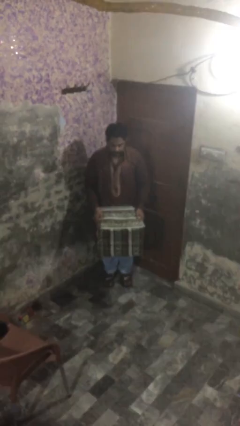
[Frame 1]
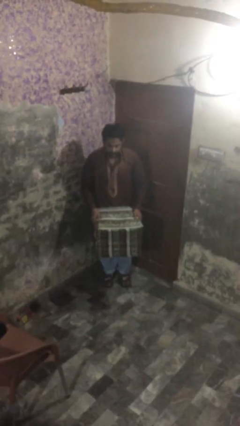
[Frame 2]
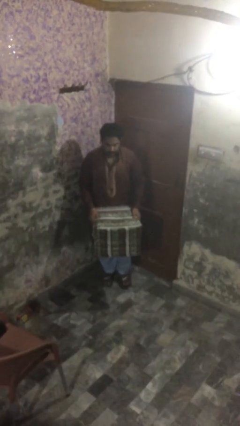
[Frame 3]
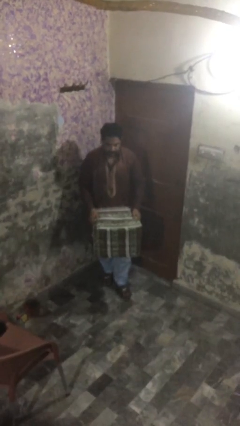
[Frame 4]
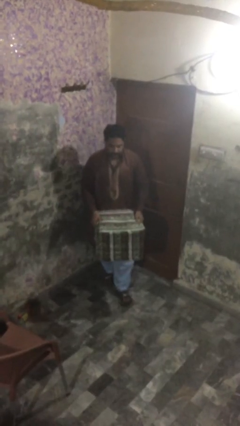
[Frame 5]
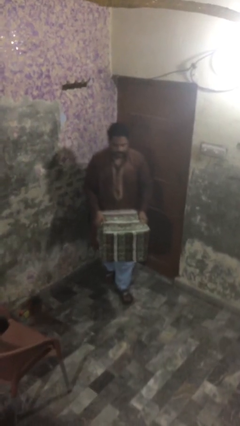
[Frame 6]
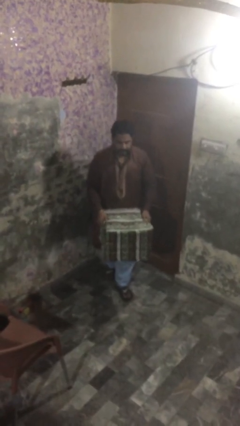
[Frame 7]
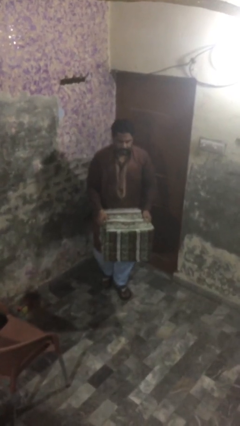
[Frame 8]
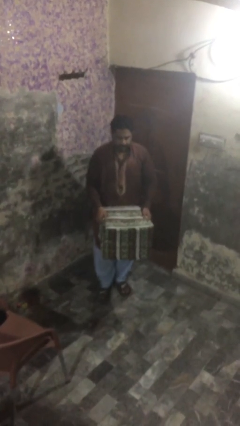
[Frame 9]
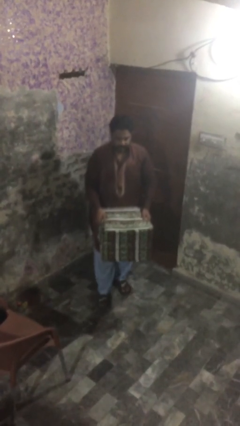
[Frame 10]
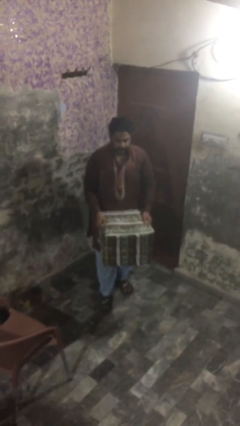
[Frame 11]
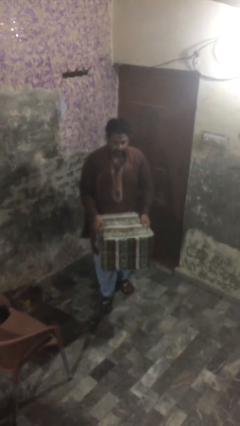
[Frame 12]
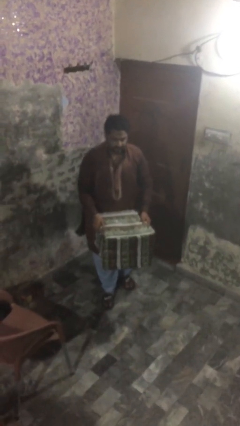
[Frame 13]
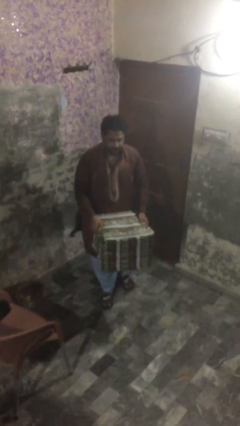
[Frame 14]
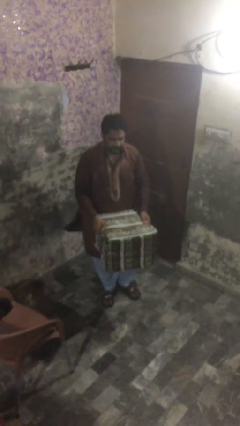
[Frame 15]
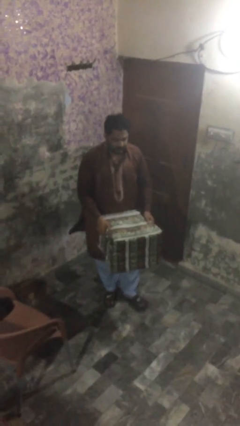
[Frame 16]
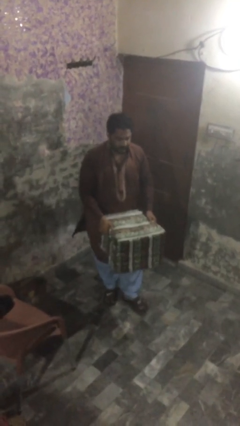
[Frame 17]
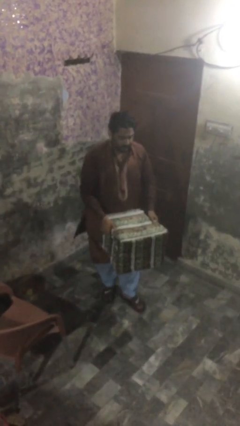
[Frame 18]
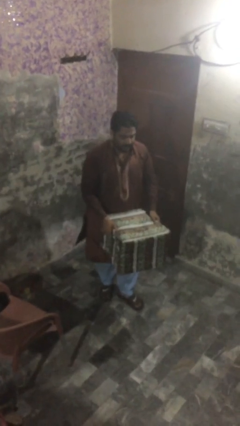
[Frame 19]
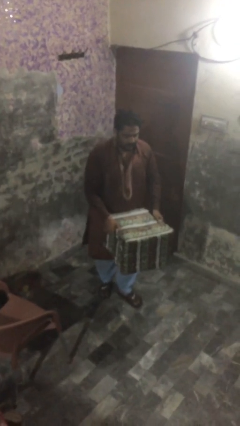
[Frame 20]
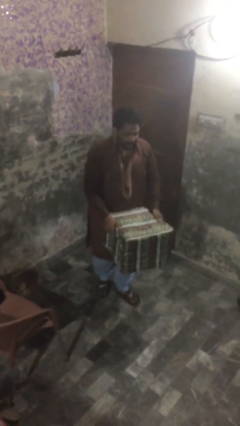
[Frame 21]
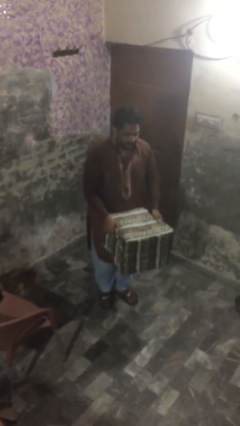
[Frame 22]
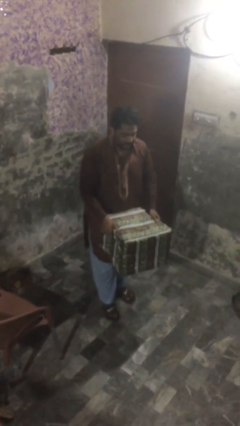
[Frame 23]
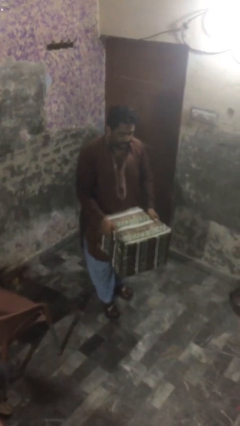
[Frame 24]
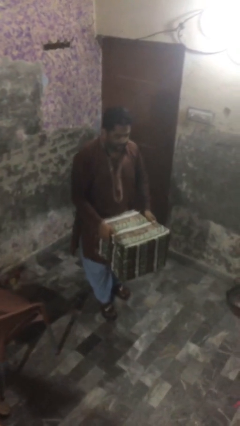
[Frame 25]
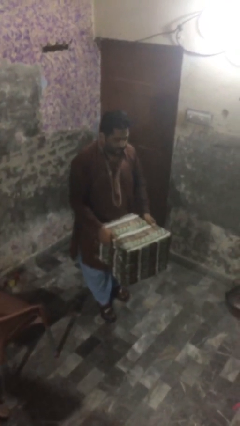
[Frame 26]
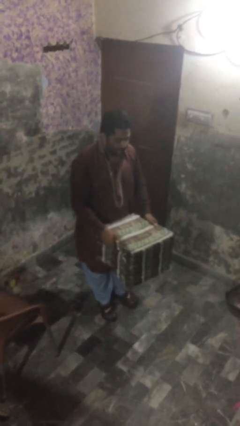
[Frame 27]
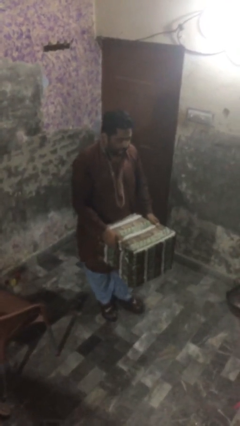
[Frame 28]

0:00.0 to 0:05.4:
person carries heavy object

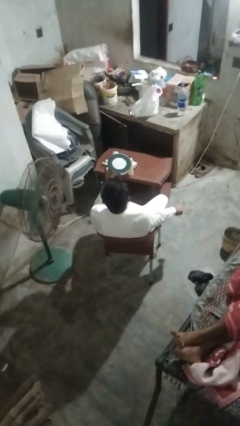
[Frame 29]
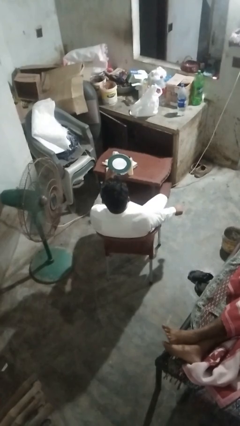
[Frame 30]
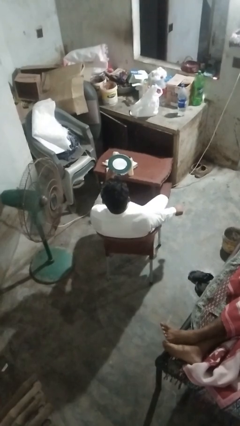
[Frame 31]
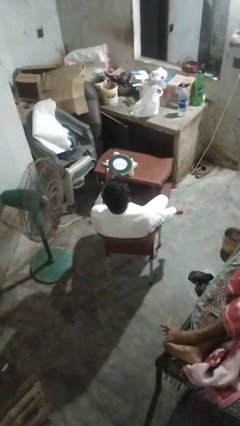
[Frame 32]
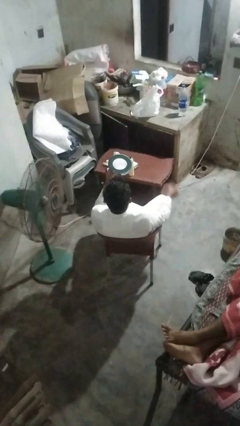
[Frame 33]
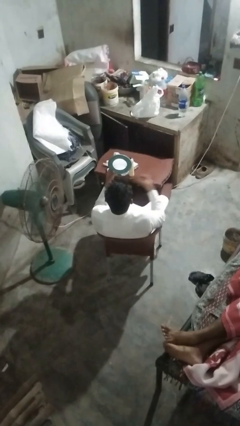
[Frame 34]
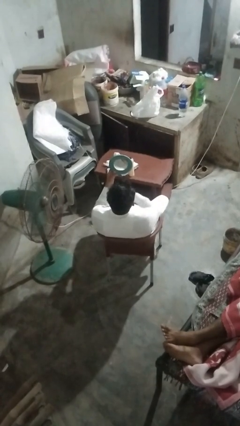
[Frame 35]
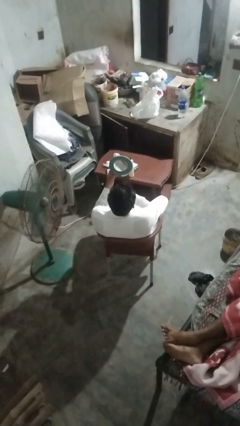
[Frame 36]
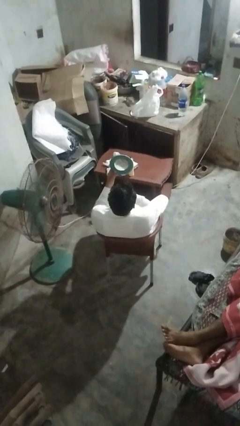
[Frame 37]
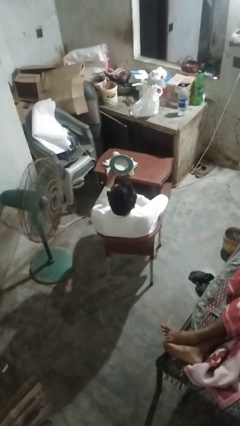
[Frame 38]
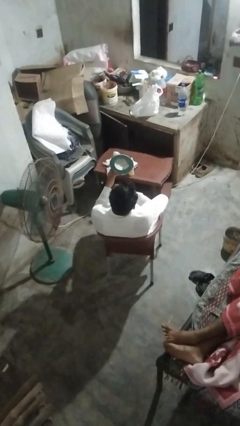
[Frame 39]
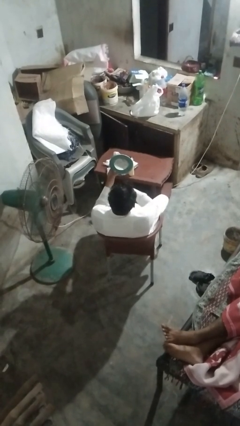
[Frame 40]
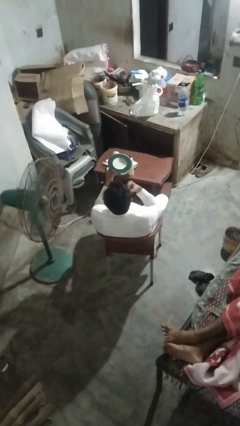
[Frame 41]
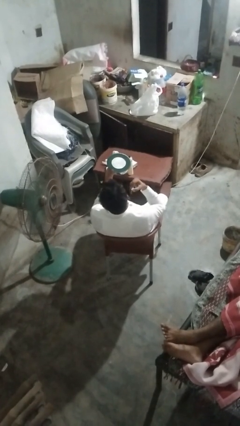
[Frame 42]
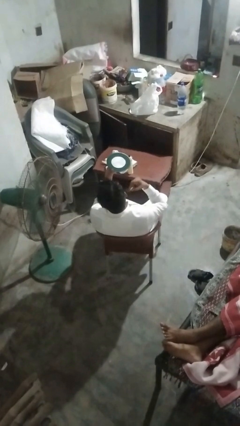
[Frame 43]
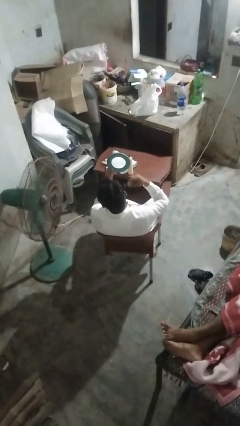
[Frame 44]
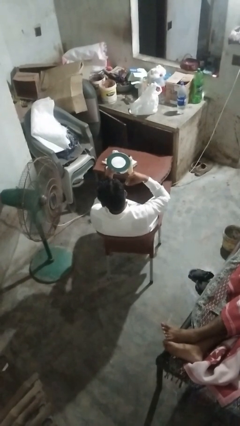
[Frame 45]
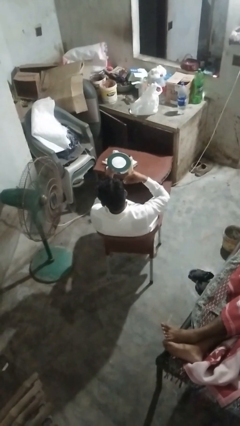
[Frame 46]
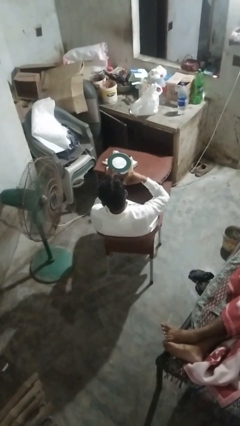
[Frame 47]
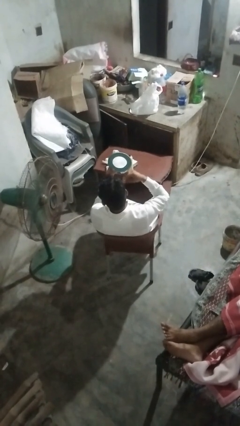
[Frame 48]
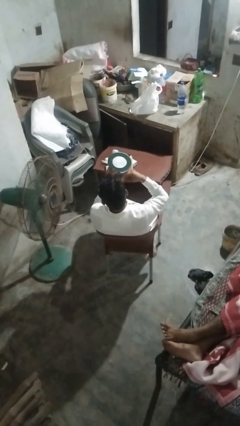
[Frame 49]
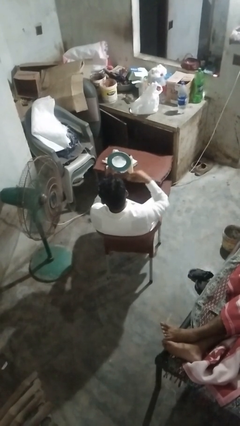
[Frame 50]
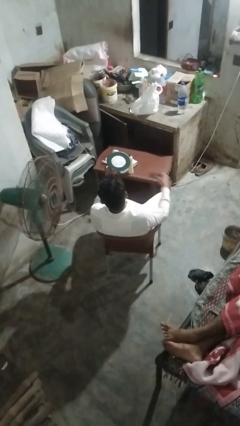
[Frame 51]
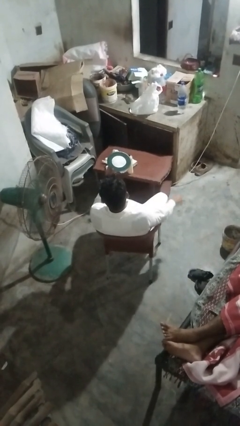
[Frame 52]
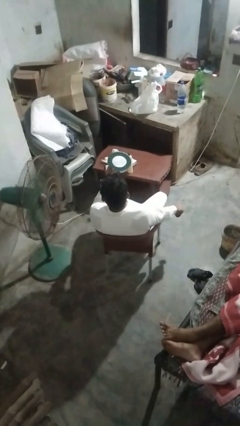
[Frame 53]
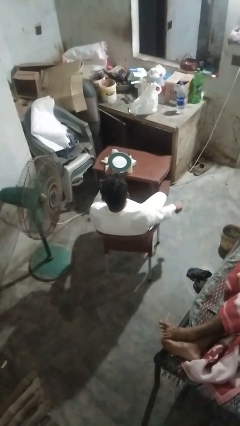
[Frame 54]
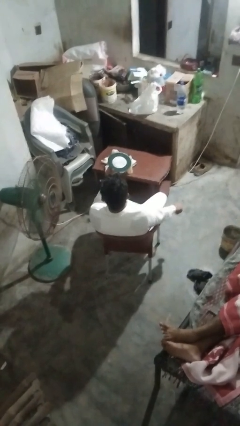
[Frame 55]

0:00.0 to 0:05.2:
person applies foundation makeup

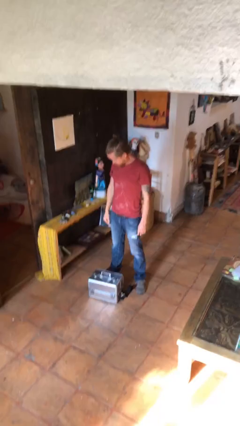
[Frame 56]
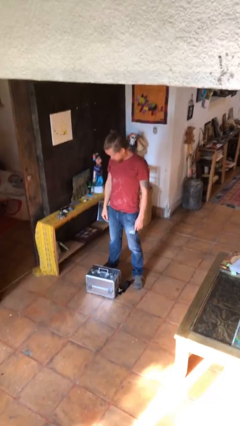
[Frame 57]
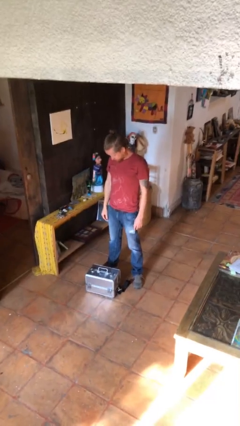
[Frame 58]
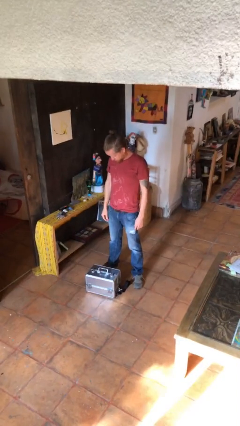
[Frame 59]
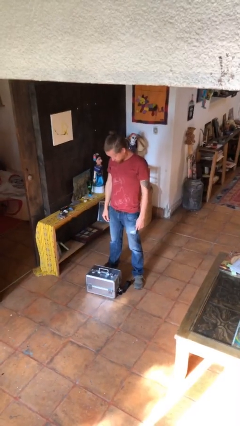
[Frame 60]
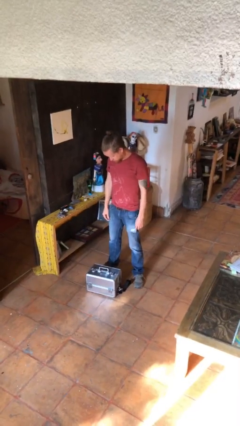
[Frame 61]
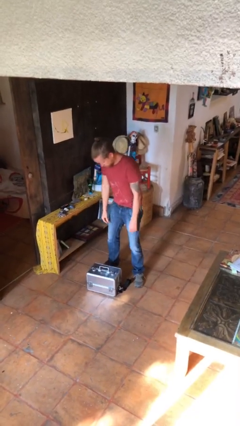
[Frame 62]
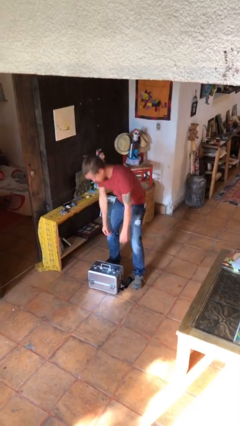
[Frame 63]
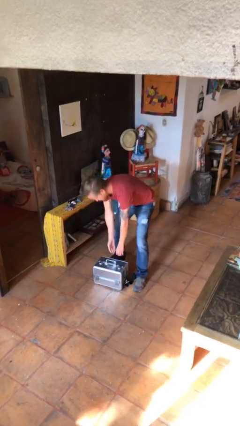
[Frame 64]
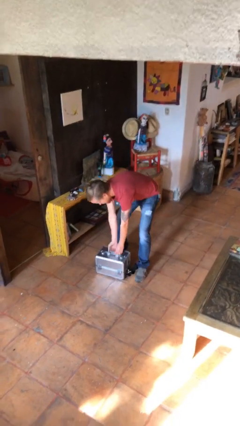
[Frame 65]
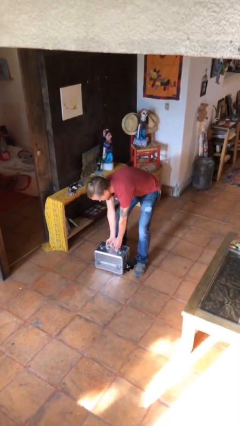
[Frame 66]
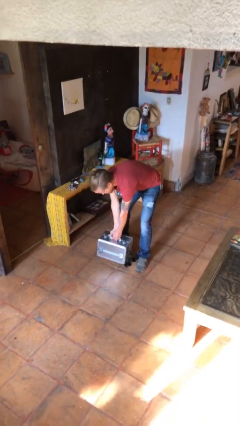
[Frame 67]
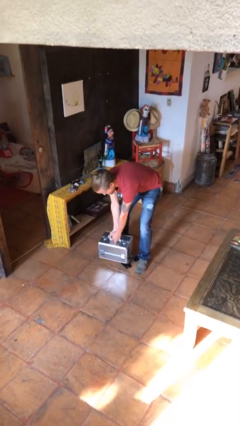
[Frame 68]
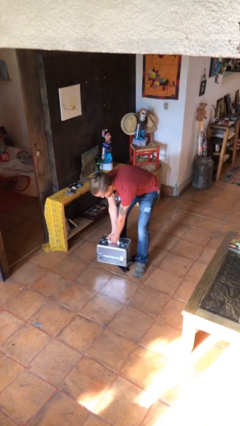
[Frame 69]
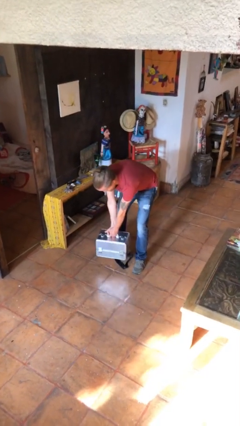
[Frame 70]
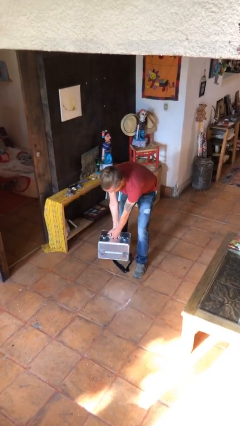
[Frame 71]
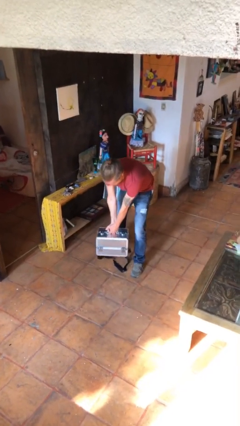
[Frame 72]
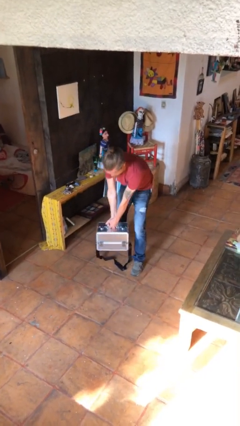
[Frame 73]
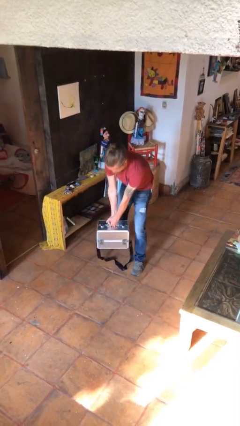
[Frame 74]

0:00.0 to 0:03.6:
person picks up object from floor

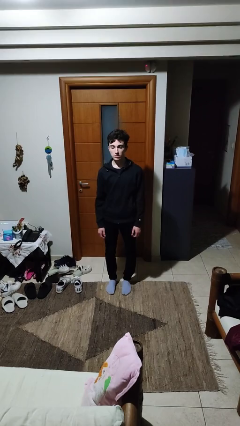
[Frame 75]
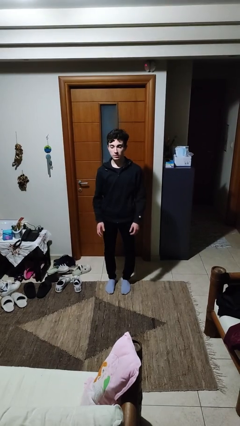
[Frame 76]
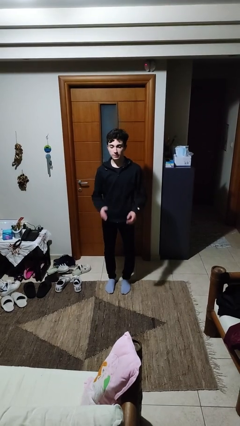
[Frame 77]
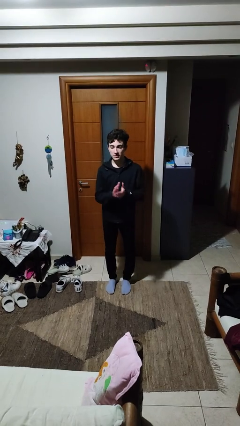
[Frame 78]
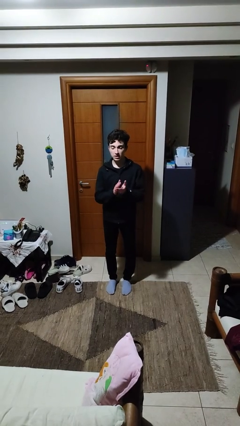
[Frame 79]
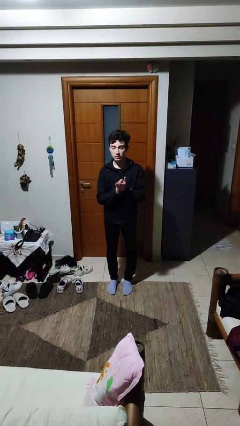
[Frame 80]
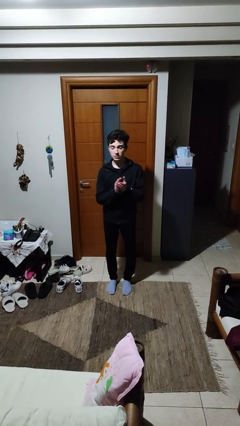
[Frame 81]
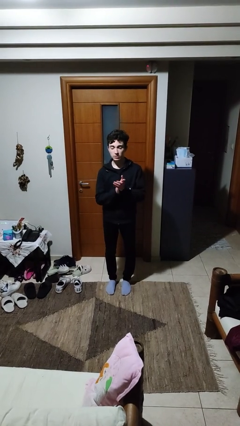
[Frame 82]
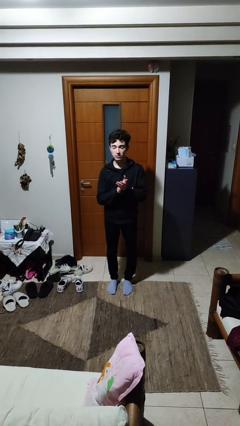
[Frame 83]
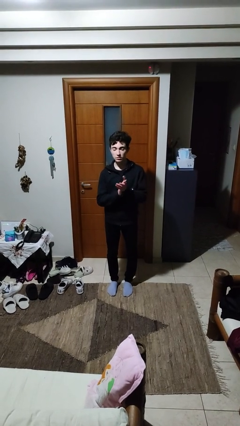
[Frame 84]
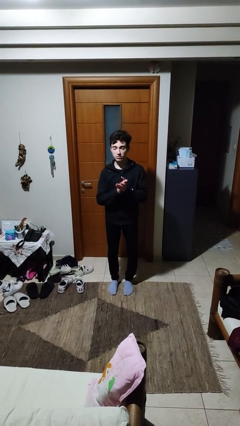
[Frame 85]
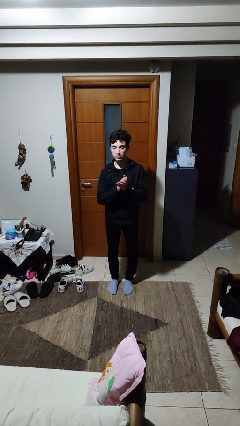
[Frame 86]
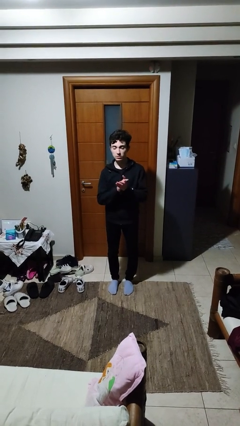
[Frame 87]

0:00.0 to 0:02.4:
person claps hands

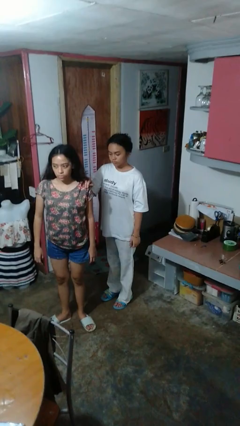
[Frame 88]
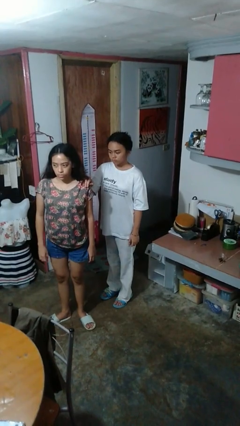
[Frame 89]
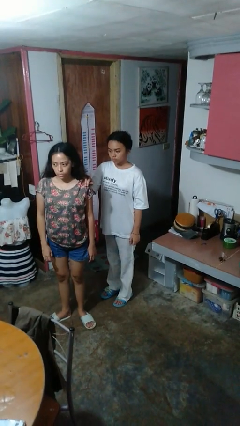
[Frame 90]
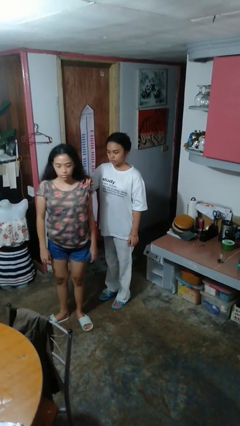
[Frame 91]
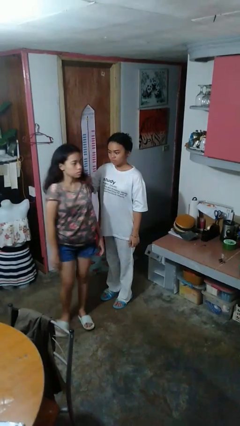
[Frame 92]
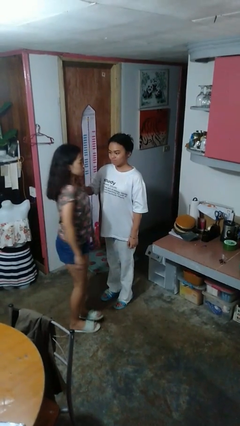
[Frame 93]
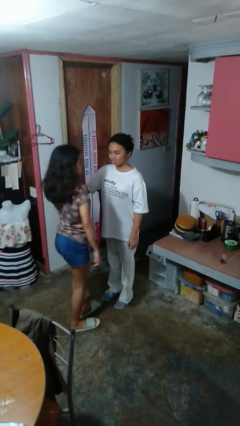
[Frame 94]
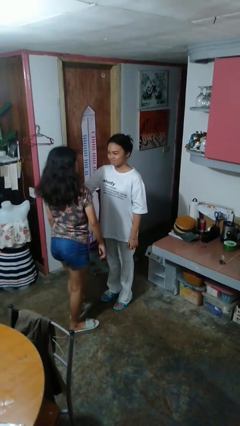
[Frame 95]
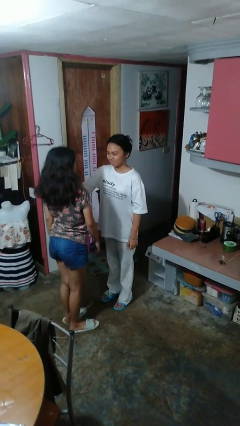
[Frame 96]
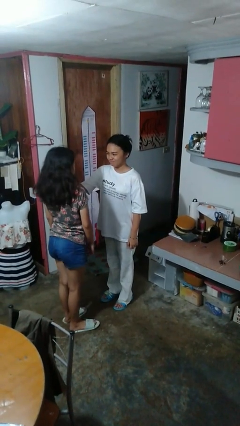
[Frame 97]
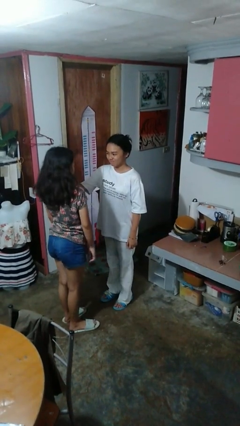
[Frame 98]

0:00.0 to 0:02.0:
person spins person around
